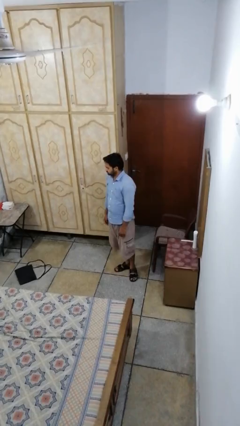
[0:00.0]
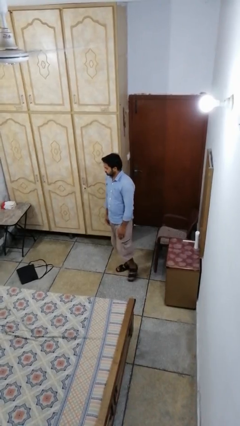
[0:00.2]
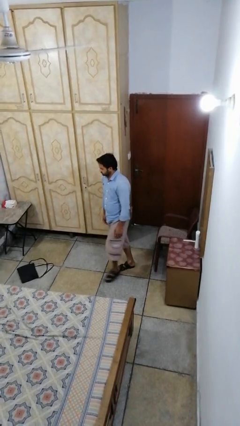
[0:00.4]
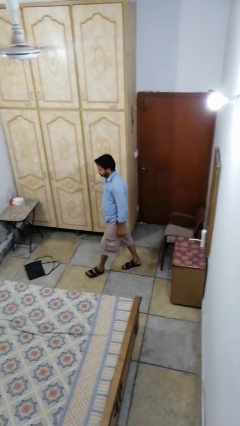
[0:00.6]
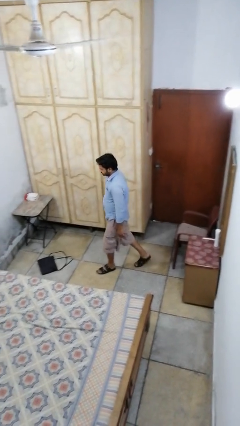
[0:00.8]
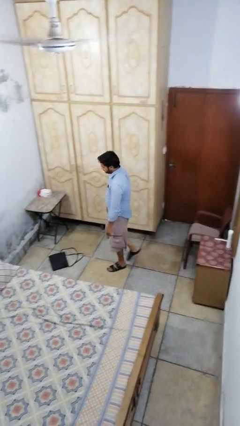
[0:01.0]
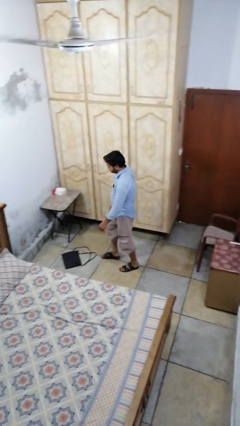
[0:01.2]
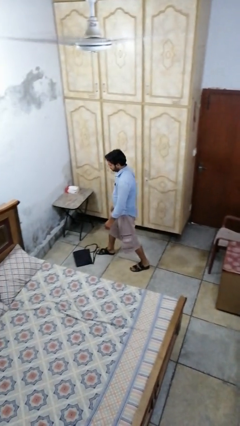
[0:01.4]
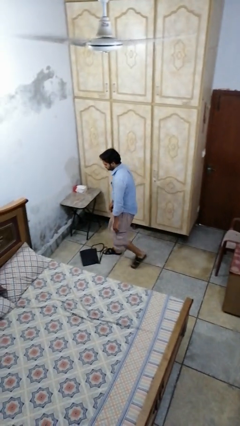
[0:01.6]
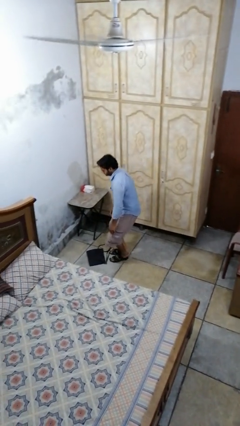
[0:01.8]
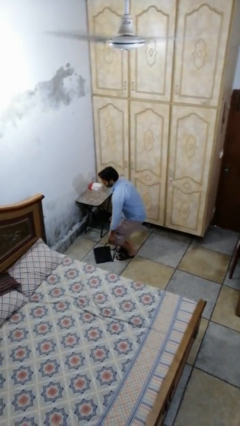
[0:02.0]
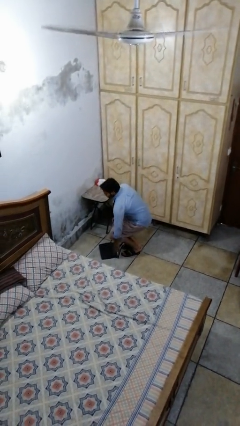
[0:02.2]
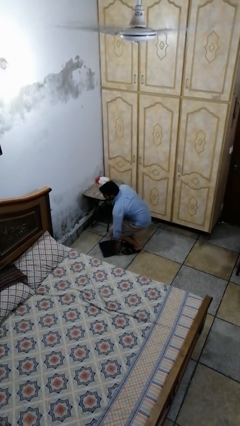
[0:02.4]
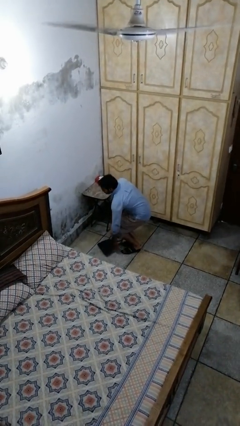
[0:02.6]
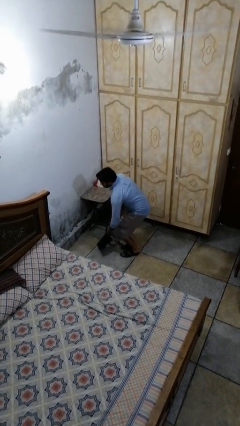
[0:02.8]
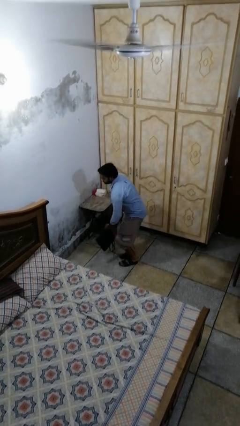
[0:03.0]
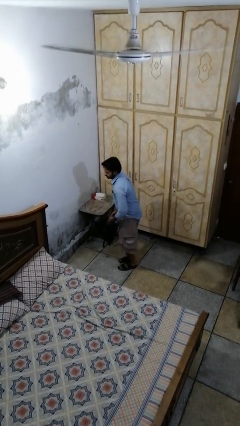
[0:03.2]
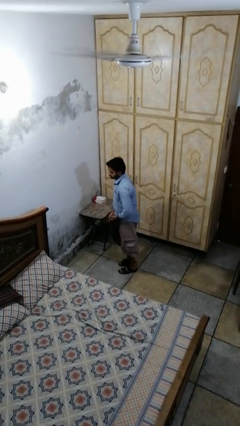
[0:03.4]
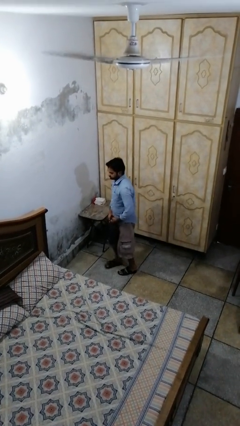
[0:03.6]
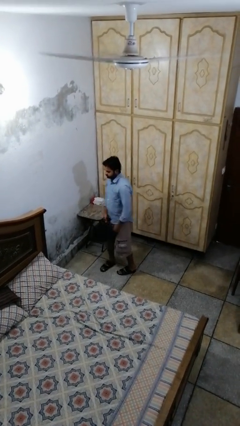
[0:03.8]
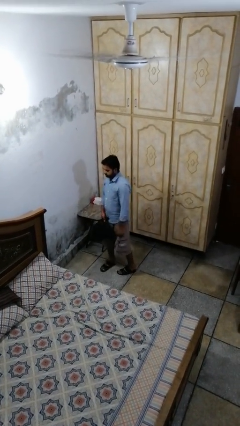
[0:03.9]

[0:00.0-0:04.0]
person picks up object from floor

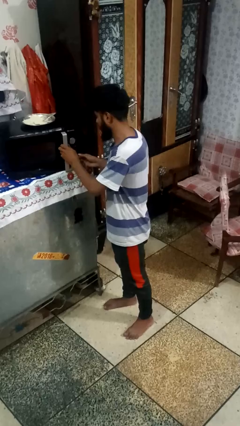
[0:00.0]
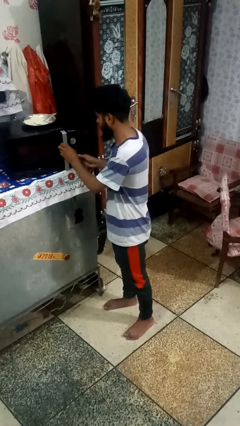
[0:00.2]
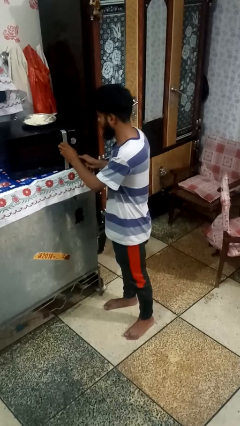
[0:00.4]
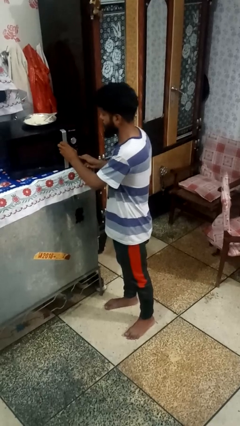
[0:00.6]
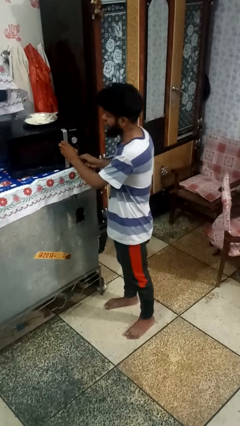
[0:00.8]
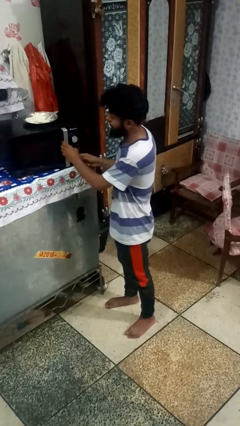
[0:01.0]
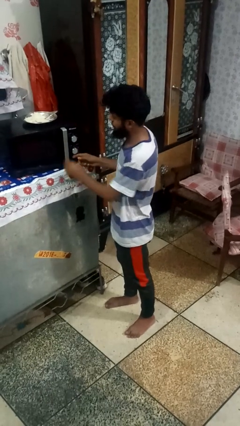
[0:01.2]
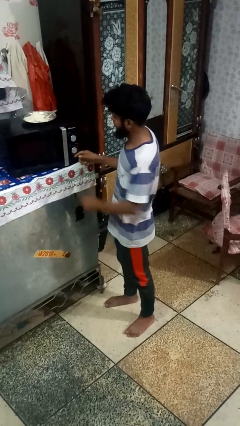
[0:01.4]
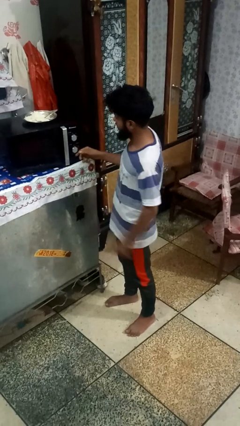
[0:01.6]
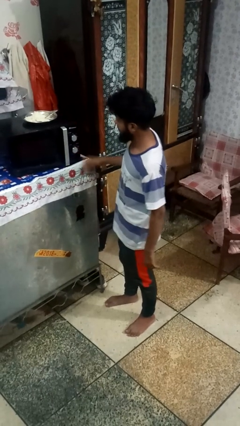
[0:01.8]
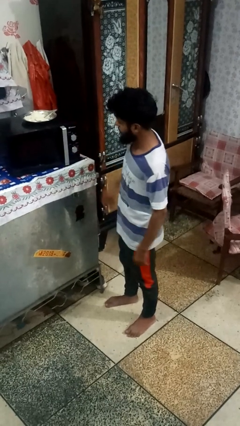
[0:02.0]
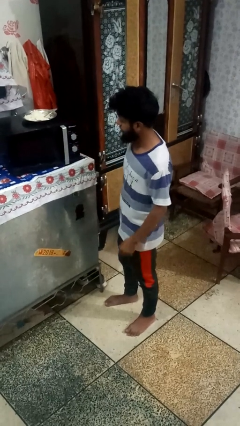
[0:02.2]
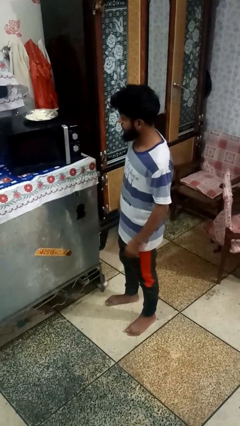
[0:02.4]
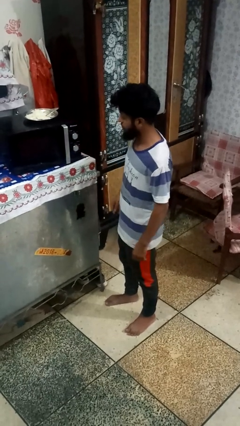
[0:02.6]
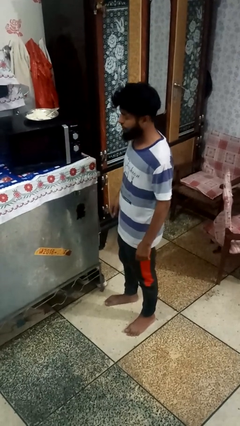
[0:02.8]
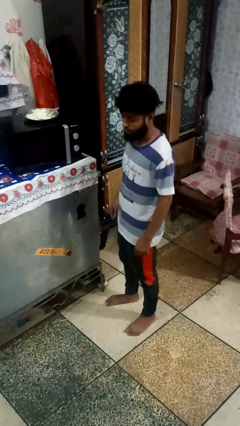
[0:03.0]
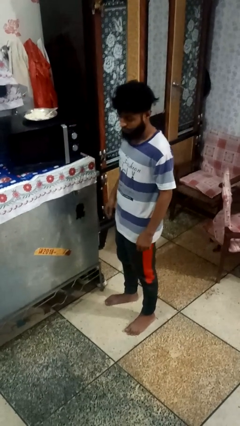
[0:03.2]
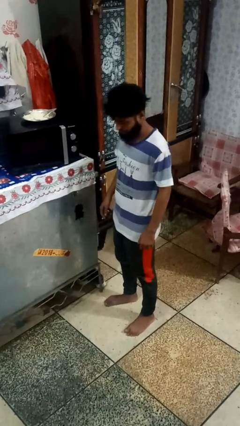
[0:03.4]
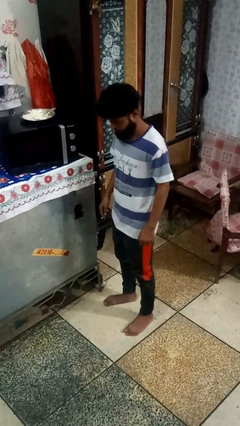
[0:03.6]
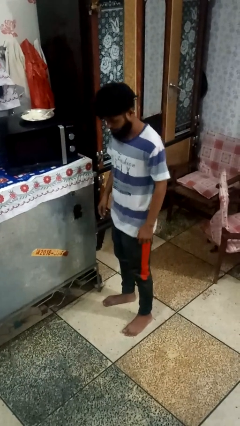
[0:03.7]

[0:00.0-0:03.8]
person closes oven door

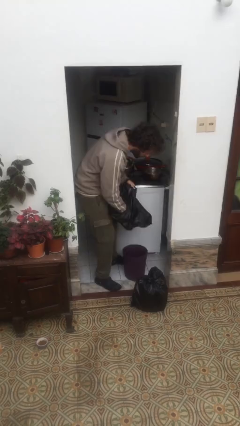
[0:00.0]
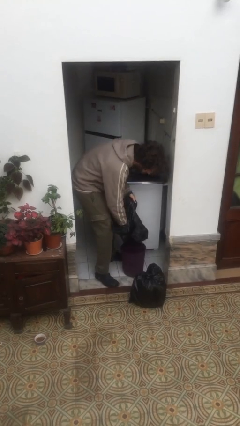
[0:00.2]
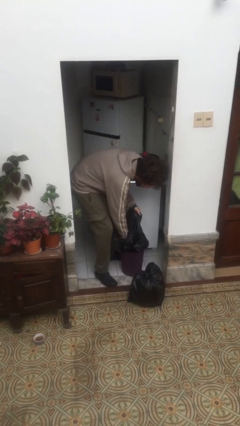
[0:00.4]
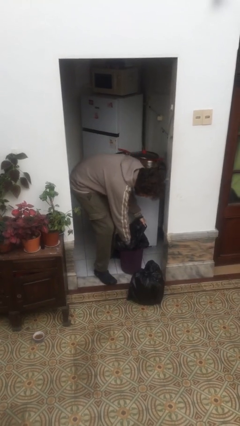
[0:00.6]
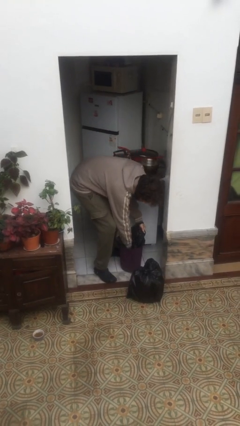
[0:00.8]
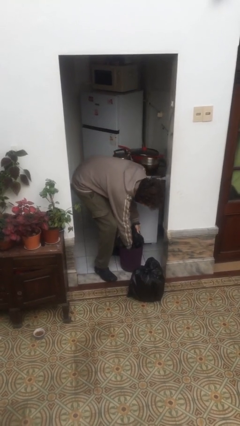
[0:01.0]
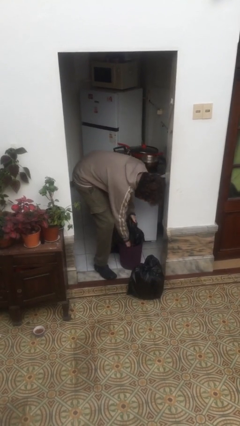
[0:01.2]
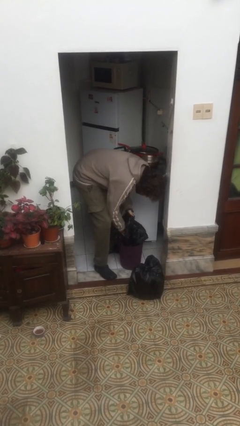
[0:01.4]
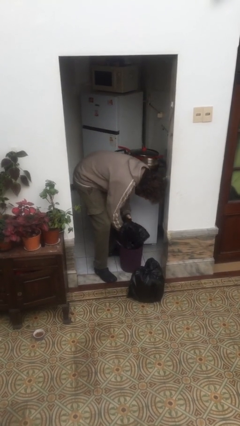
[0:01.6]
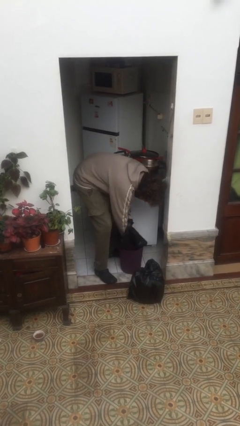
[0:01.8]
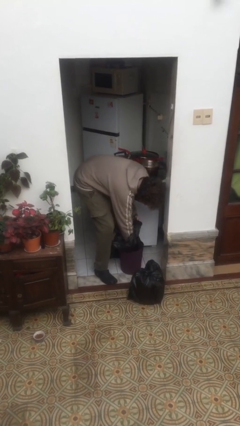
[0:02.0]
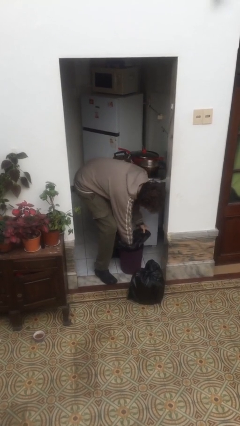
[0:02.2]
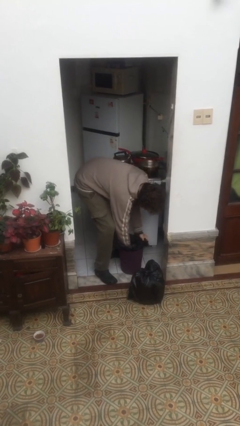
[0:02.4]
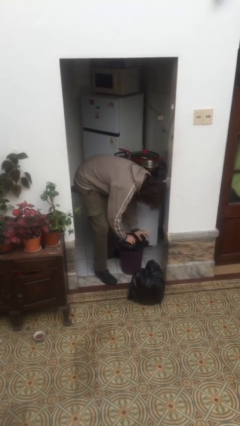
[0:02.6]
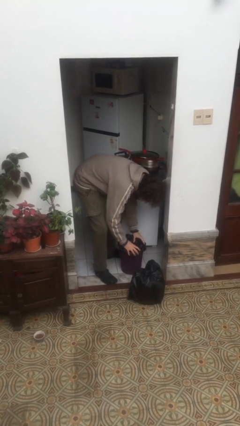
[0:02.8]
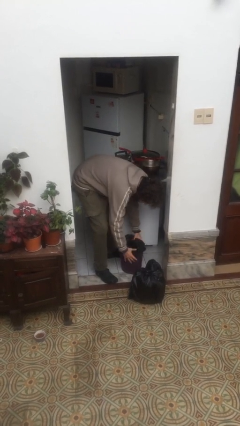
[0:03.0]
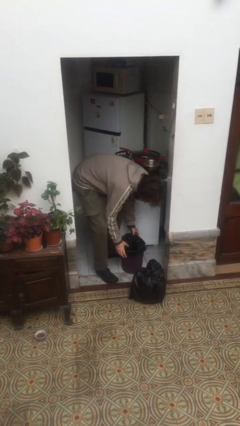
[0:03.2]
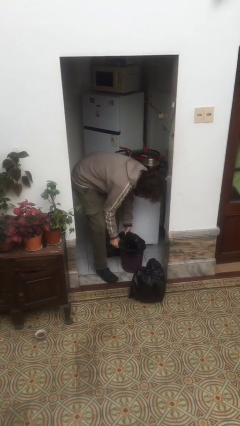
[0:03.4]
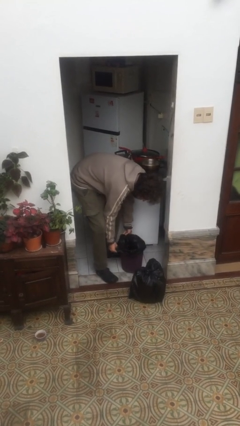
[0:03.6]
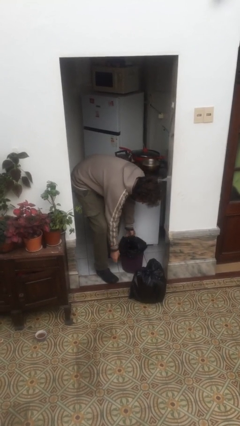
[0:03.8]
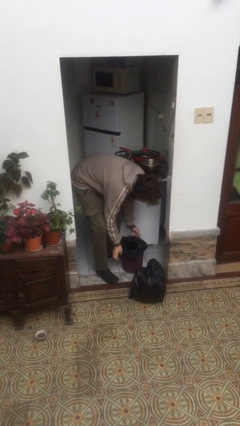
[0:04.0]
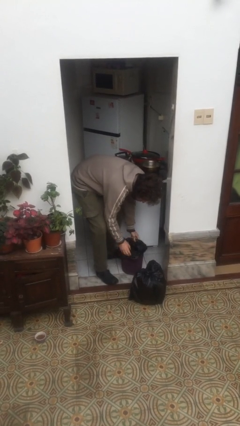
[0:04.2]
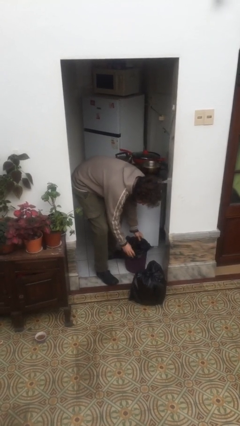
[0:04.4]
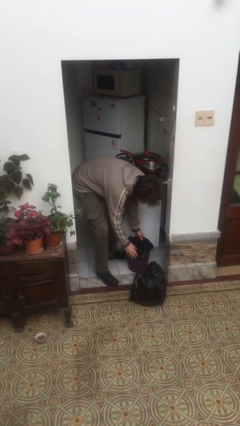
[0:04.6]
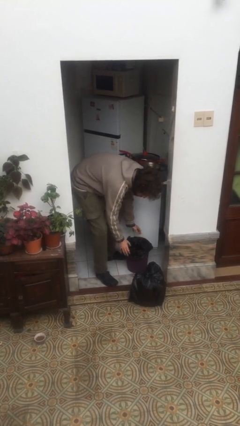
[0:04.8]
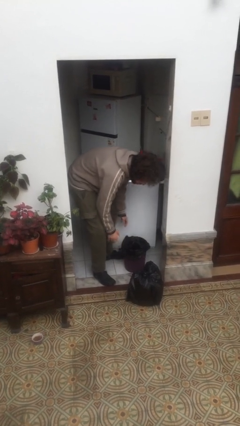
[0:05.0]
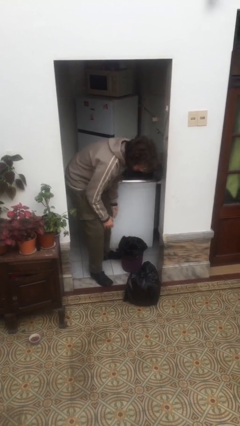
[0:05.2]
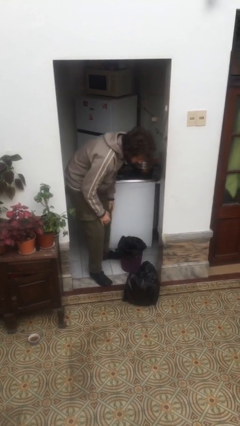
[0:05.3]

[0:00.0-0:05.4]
person inserts trashbag into trashcan

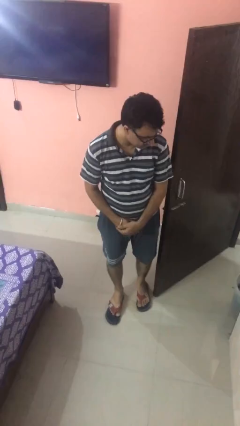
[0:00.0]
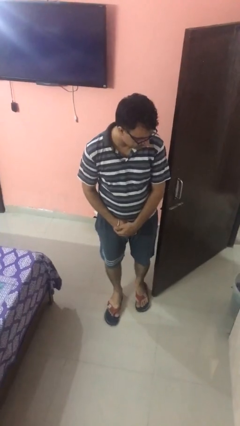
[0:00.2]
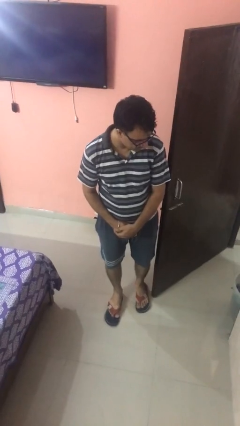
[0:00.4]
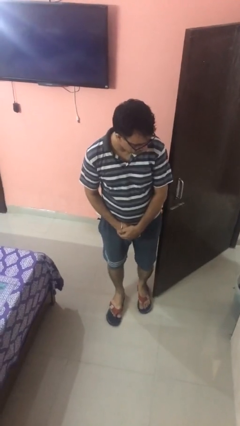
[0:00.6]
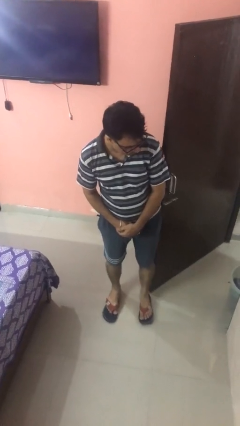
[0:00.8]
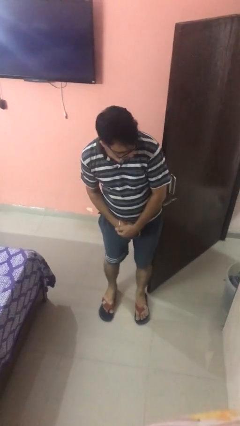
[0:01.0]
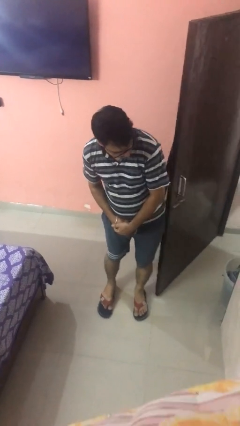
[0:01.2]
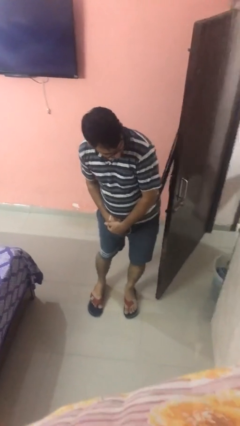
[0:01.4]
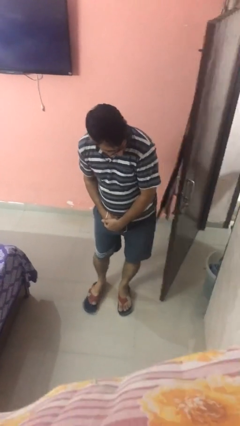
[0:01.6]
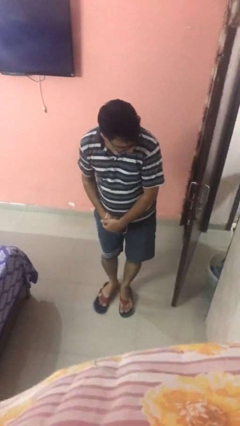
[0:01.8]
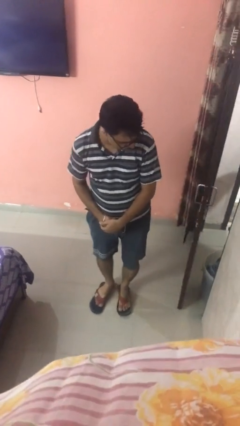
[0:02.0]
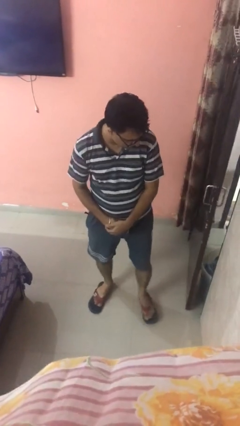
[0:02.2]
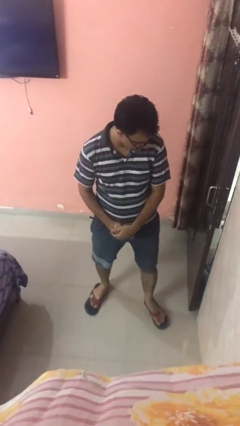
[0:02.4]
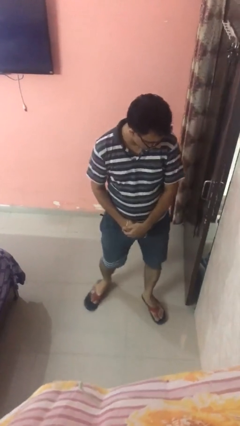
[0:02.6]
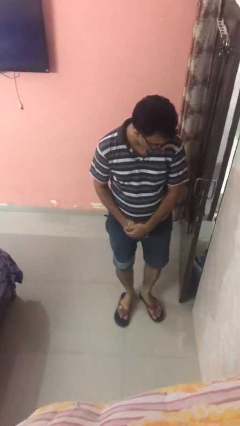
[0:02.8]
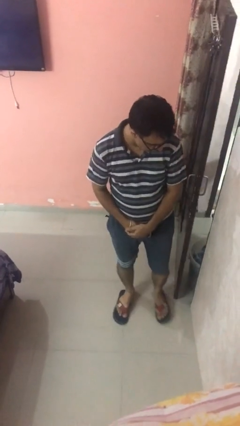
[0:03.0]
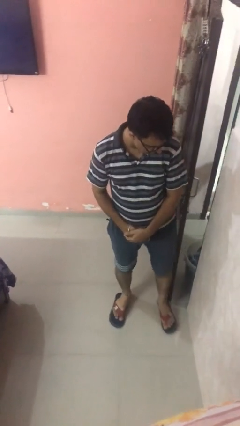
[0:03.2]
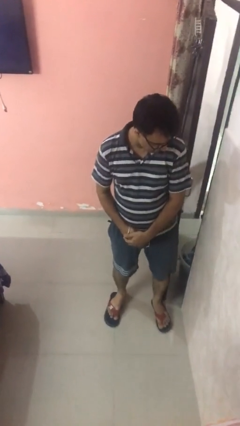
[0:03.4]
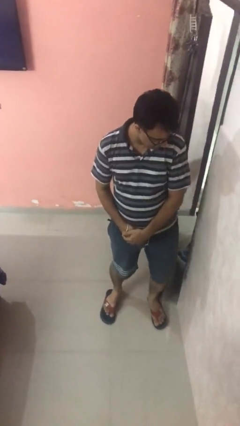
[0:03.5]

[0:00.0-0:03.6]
person closes door with hip

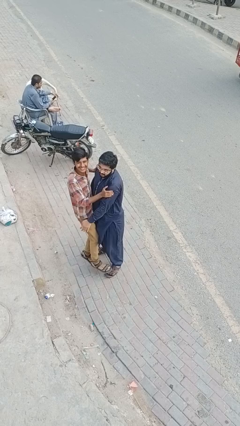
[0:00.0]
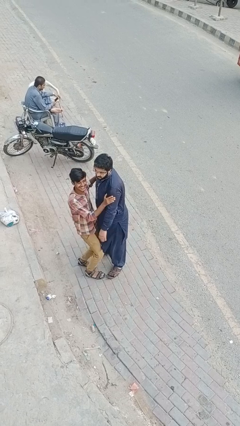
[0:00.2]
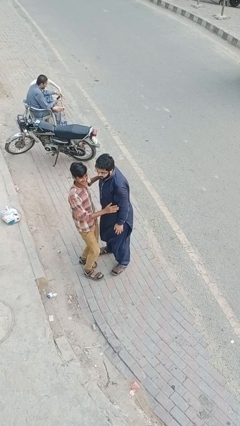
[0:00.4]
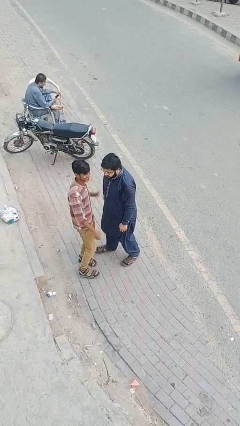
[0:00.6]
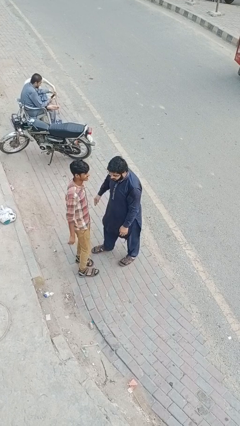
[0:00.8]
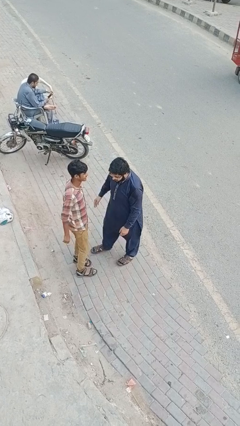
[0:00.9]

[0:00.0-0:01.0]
person puts down person
